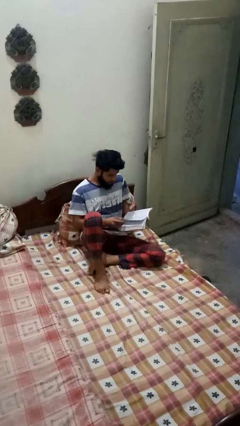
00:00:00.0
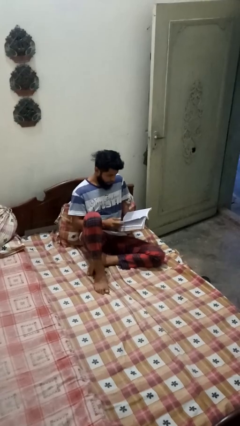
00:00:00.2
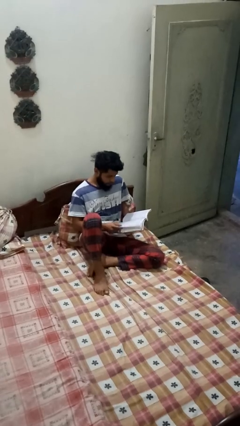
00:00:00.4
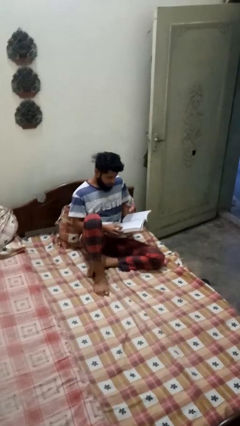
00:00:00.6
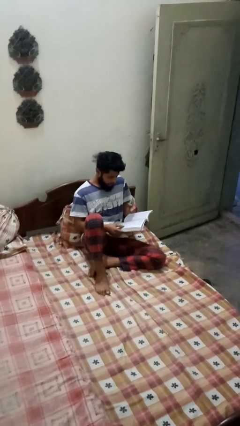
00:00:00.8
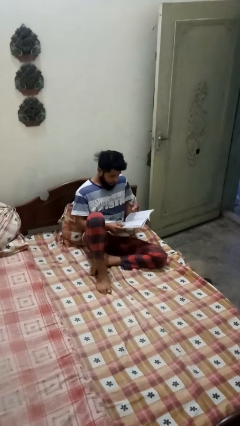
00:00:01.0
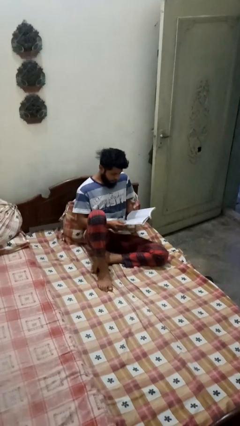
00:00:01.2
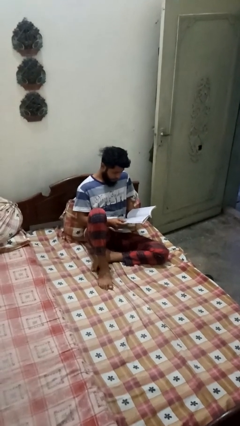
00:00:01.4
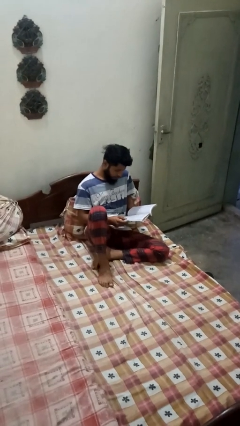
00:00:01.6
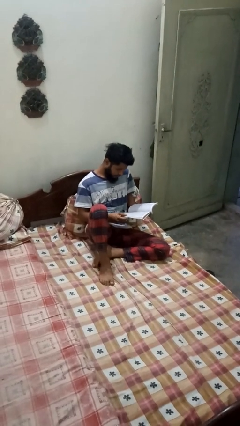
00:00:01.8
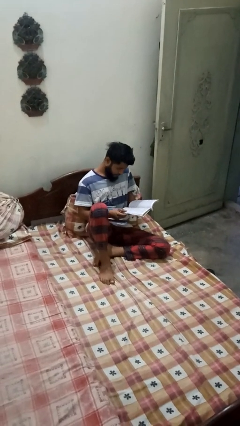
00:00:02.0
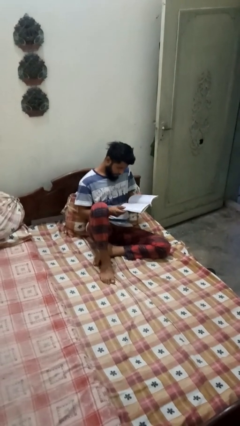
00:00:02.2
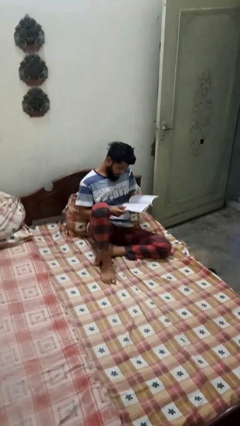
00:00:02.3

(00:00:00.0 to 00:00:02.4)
person reads book

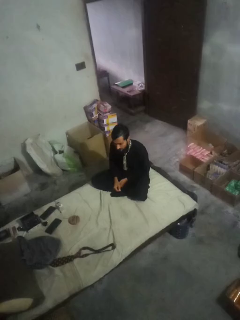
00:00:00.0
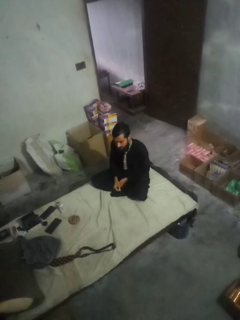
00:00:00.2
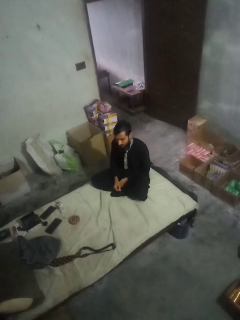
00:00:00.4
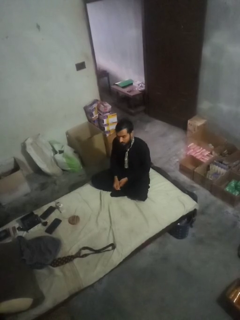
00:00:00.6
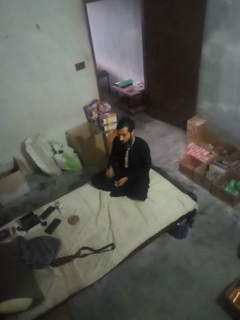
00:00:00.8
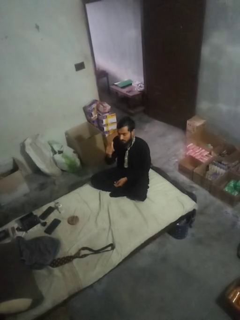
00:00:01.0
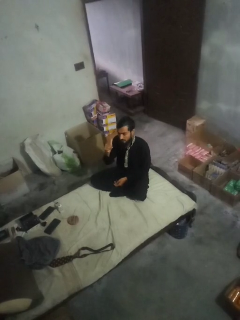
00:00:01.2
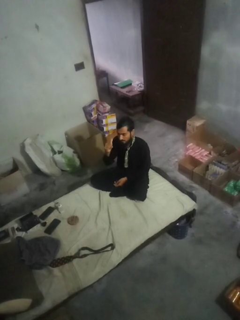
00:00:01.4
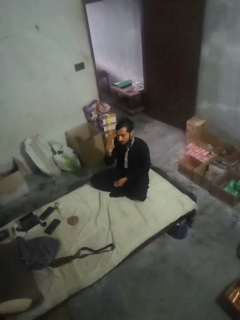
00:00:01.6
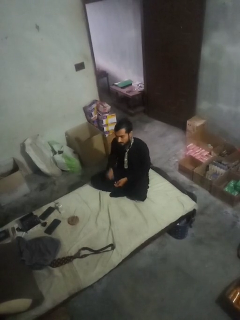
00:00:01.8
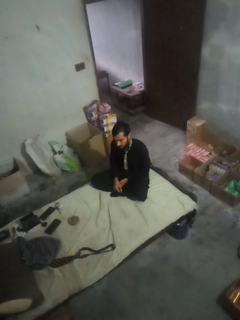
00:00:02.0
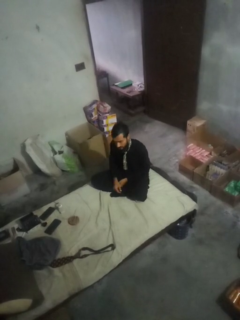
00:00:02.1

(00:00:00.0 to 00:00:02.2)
person gestures behind me

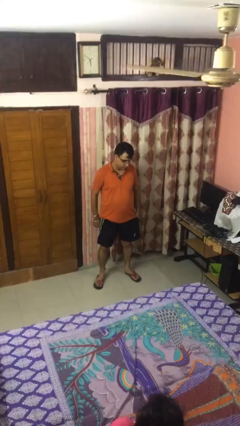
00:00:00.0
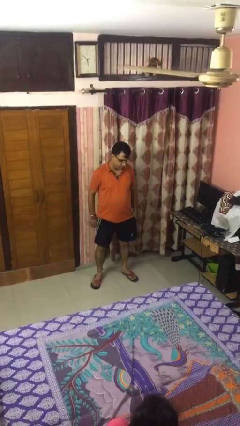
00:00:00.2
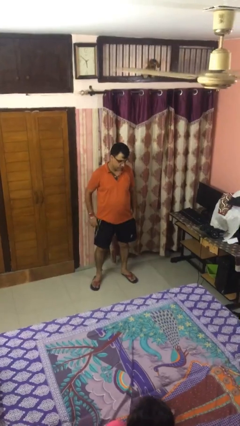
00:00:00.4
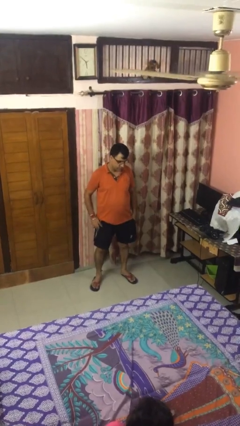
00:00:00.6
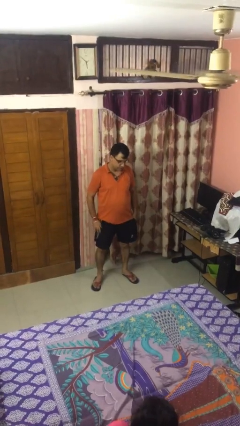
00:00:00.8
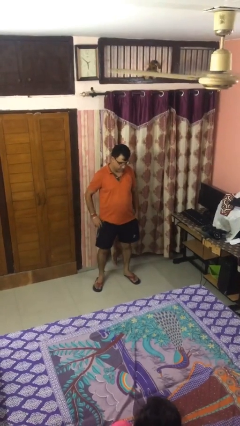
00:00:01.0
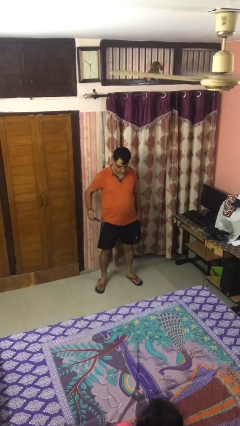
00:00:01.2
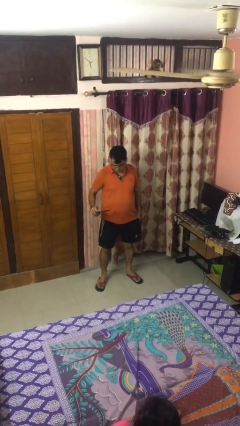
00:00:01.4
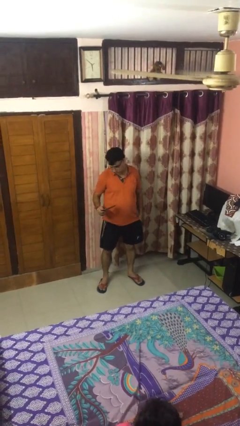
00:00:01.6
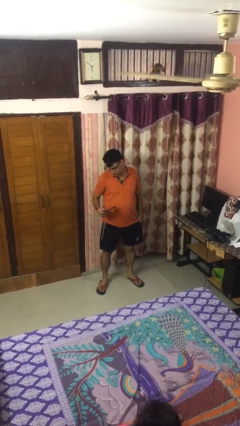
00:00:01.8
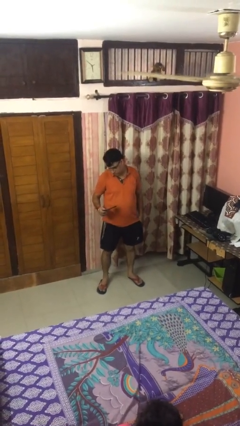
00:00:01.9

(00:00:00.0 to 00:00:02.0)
person takes phone from pocket

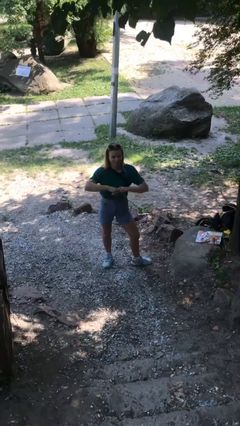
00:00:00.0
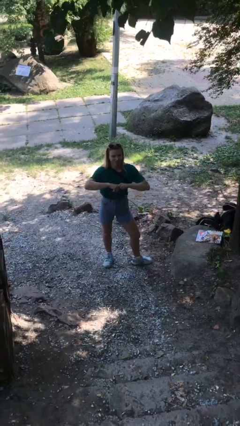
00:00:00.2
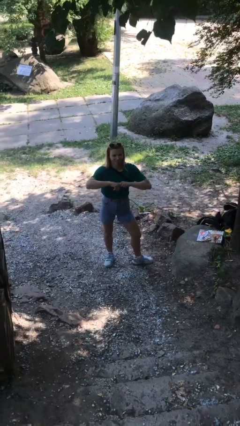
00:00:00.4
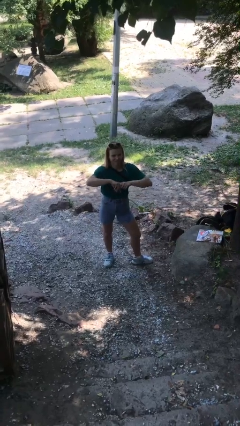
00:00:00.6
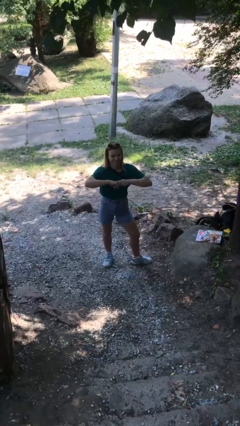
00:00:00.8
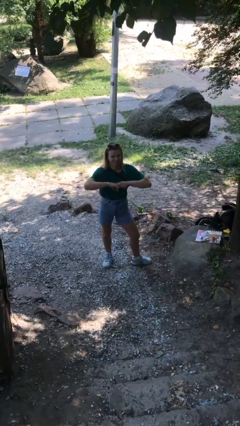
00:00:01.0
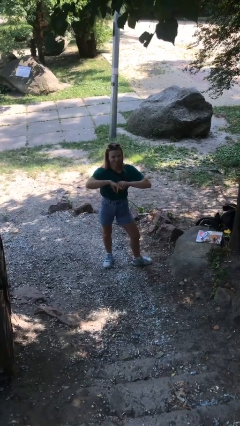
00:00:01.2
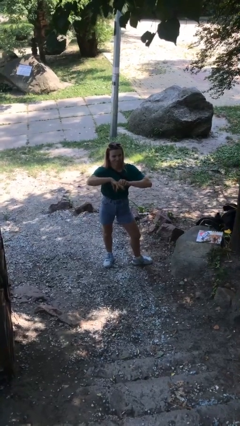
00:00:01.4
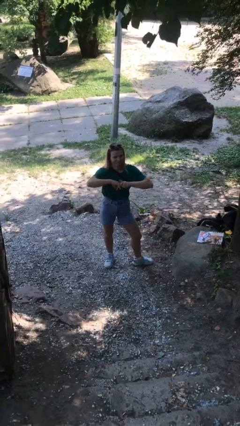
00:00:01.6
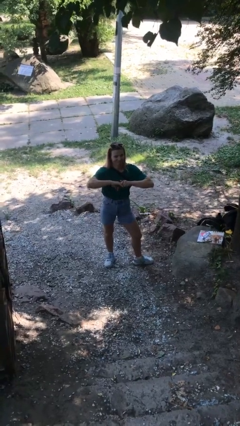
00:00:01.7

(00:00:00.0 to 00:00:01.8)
person cracks knuckles

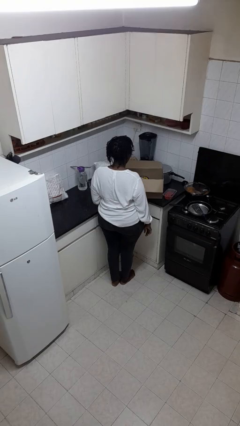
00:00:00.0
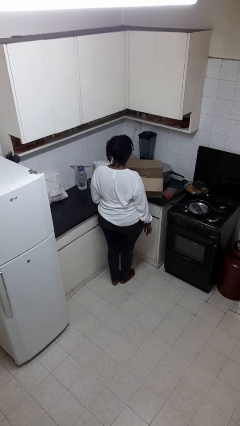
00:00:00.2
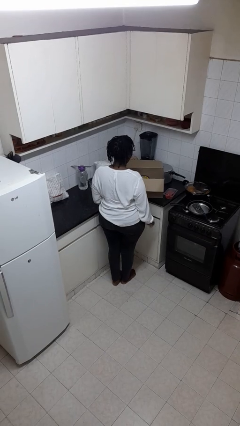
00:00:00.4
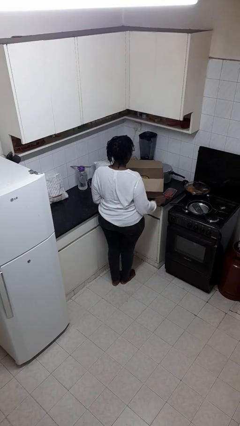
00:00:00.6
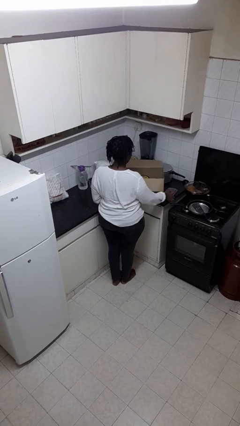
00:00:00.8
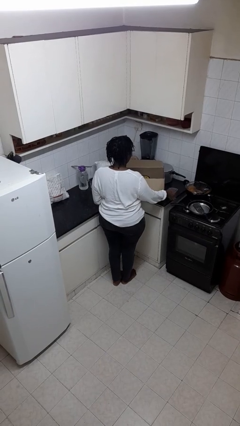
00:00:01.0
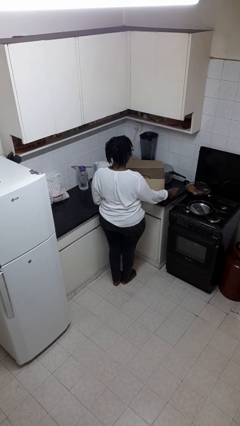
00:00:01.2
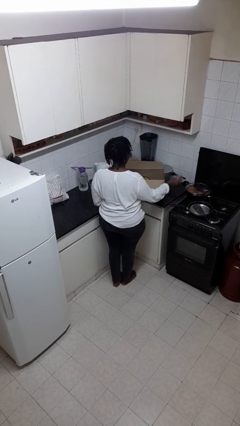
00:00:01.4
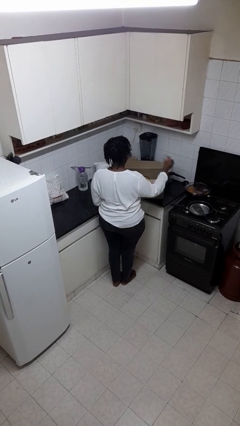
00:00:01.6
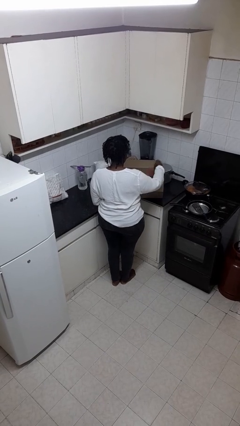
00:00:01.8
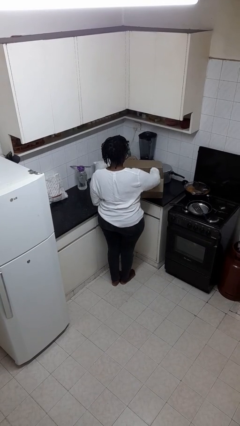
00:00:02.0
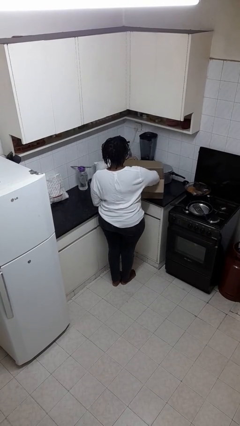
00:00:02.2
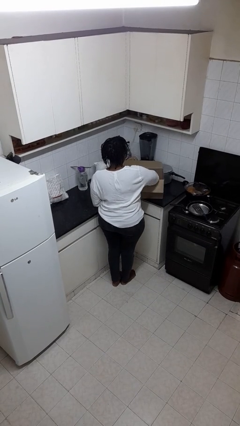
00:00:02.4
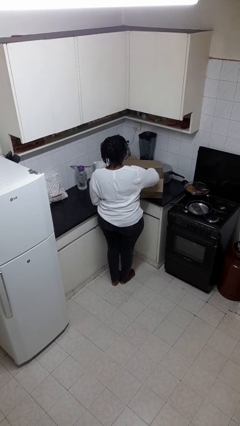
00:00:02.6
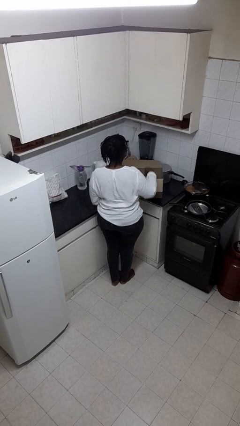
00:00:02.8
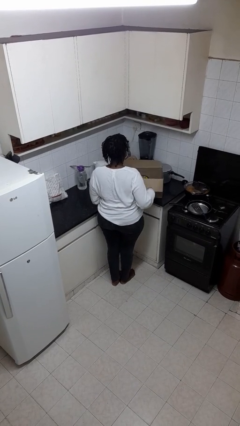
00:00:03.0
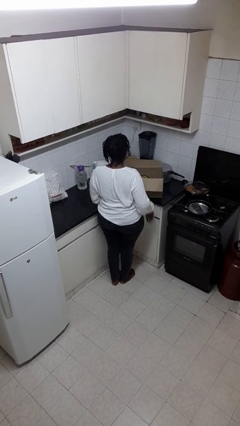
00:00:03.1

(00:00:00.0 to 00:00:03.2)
person puts object into box

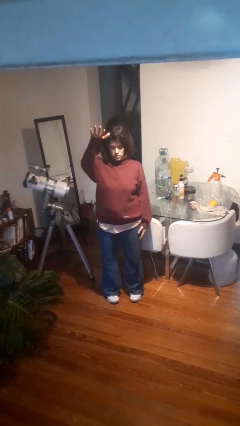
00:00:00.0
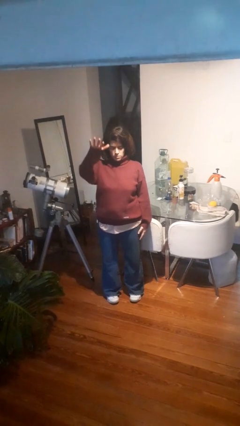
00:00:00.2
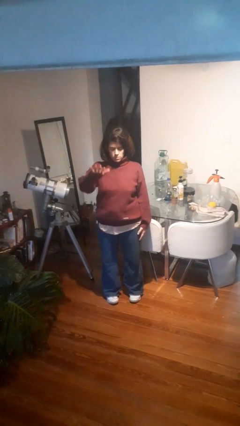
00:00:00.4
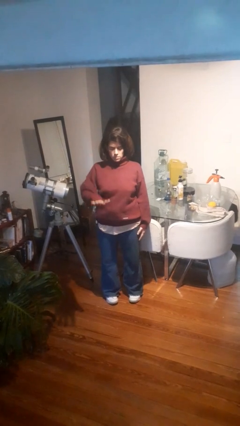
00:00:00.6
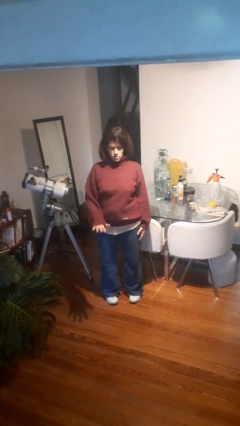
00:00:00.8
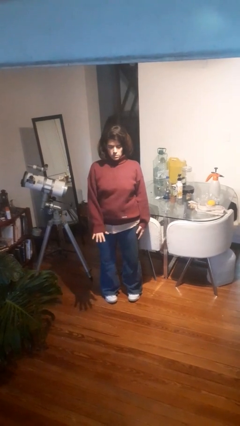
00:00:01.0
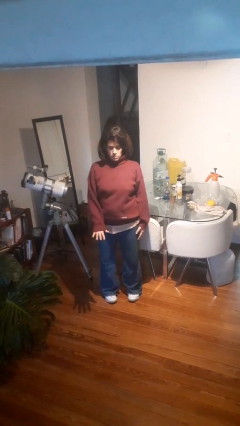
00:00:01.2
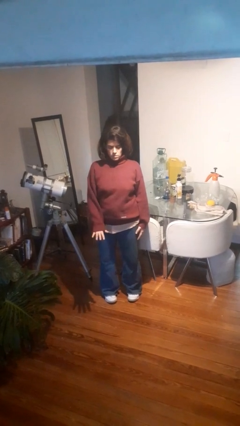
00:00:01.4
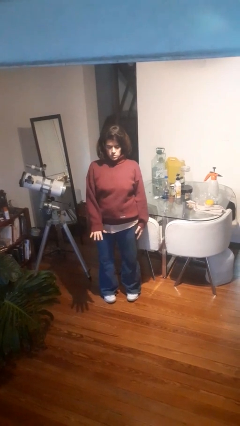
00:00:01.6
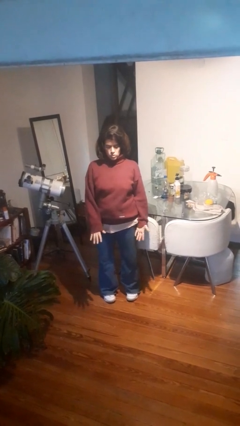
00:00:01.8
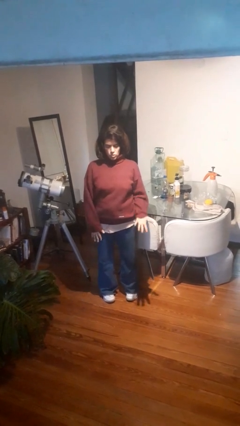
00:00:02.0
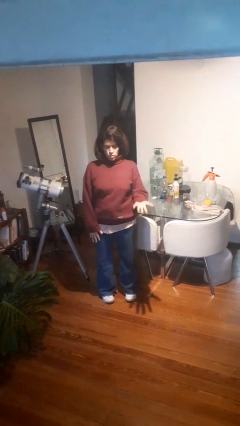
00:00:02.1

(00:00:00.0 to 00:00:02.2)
person gestures swipe down

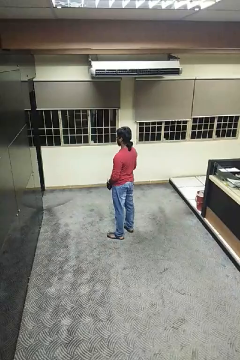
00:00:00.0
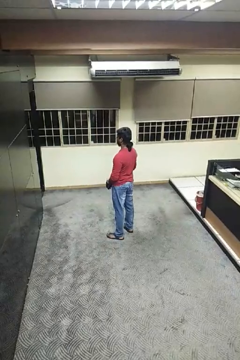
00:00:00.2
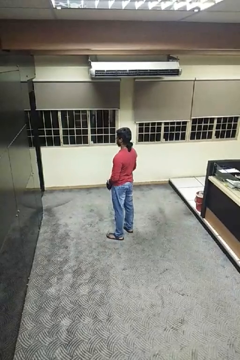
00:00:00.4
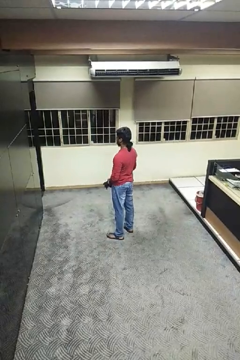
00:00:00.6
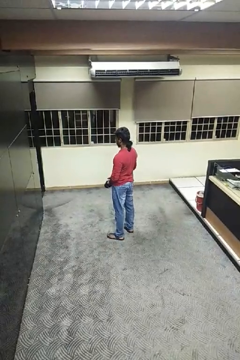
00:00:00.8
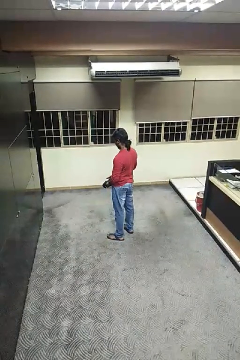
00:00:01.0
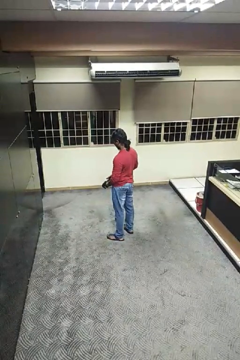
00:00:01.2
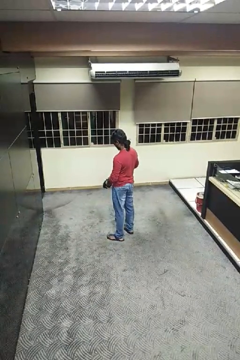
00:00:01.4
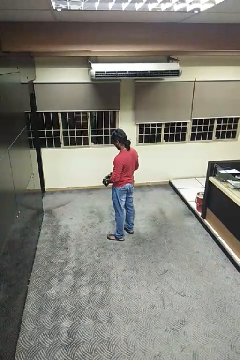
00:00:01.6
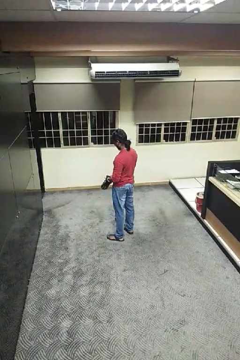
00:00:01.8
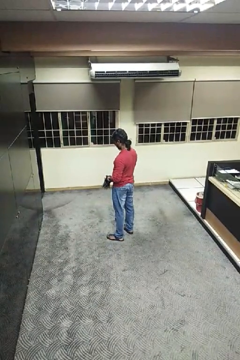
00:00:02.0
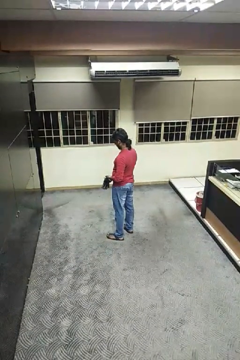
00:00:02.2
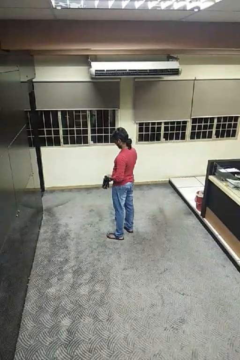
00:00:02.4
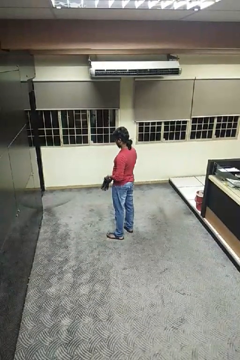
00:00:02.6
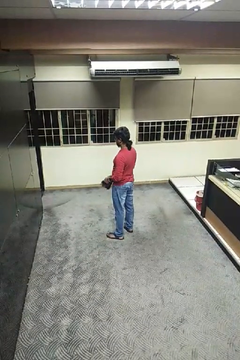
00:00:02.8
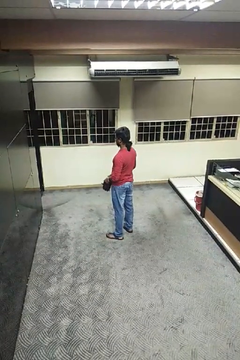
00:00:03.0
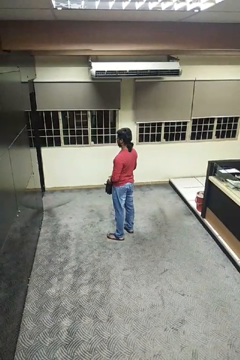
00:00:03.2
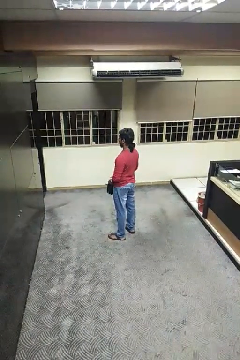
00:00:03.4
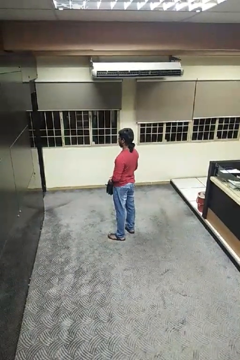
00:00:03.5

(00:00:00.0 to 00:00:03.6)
person takes off gloves

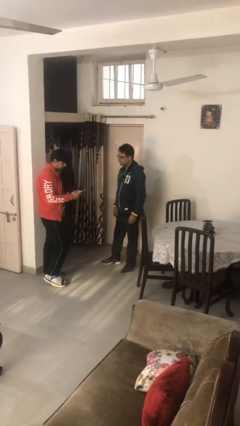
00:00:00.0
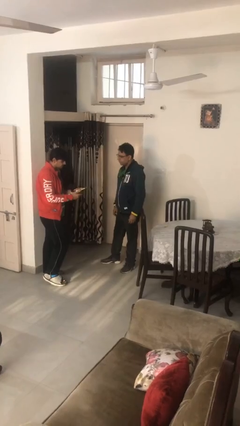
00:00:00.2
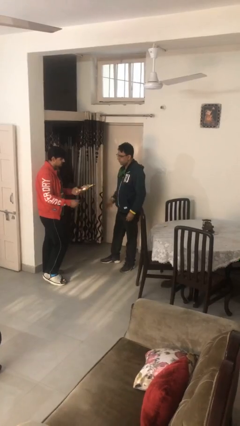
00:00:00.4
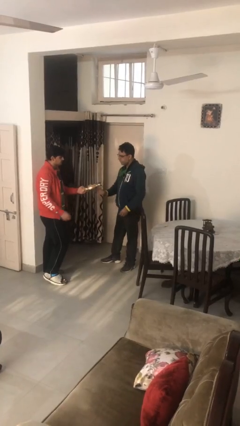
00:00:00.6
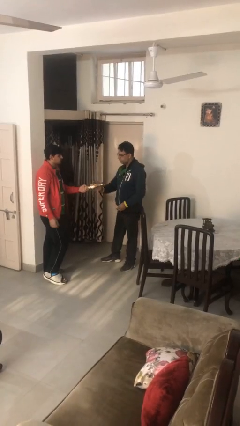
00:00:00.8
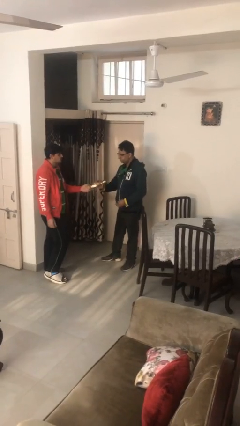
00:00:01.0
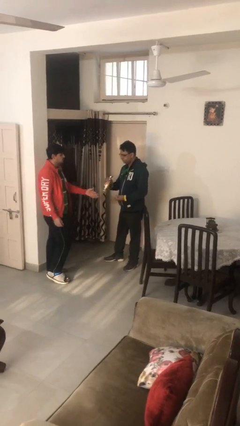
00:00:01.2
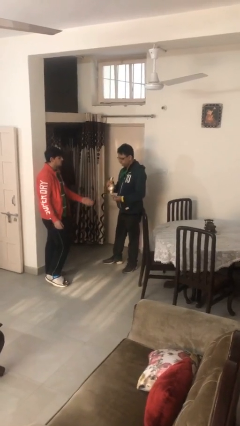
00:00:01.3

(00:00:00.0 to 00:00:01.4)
person transfers object to person
